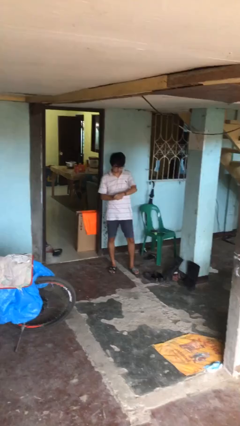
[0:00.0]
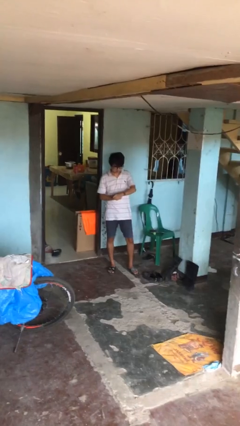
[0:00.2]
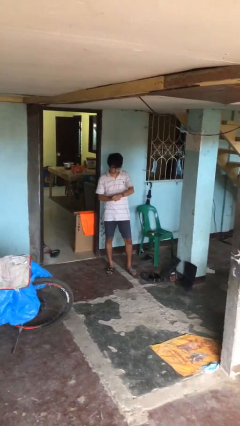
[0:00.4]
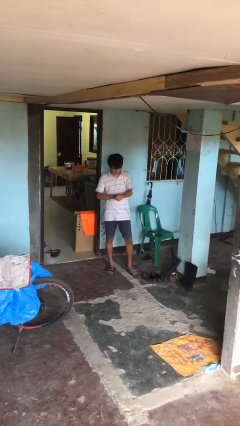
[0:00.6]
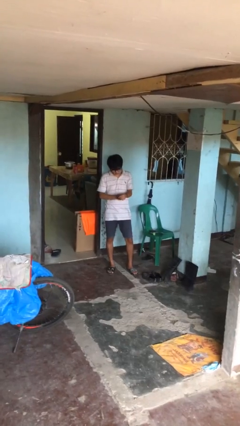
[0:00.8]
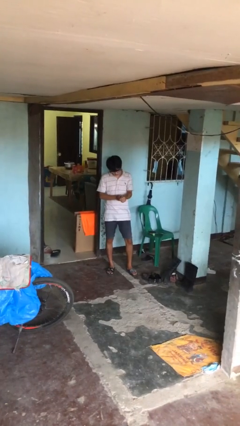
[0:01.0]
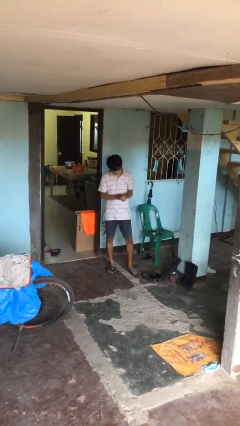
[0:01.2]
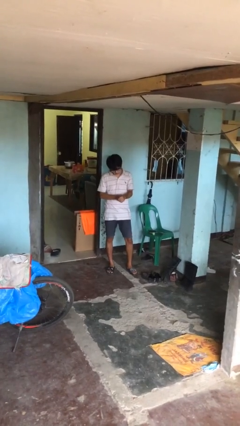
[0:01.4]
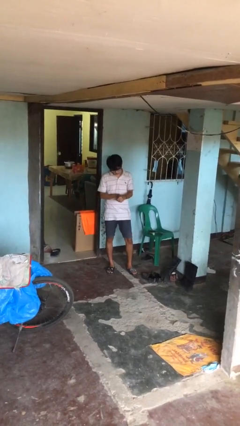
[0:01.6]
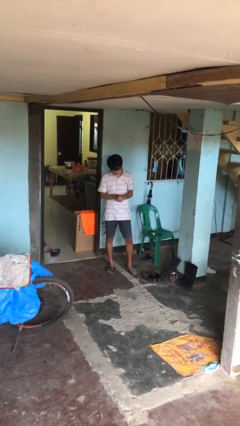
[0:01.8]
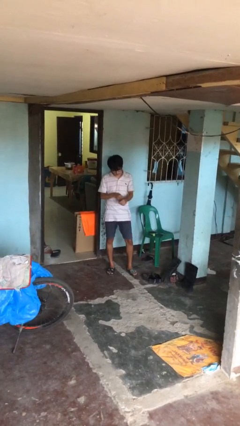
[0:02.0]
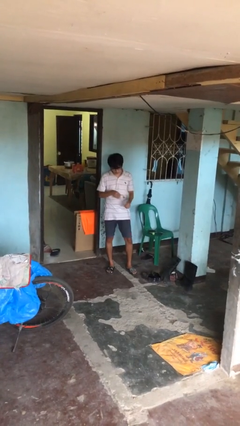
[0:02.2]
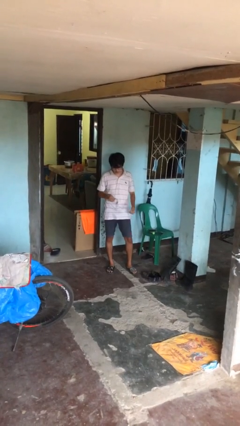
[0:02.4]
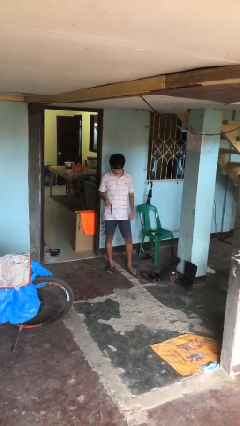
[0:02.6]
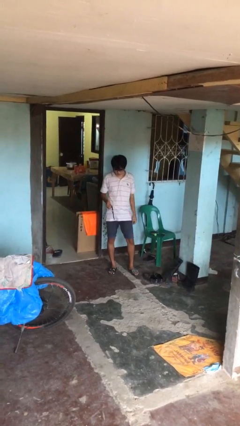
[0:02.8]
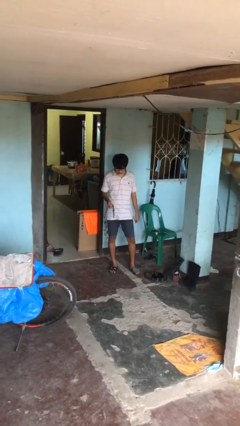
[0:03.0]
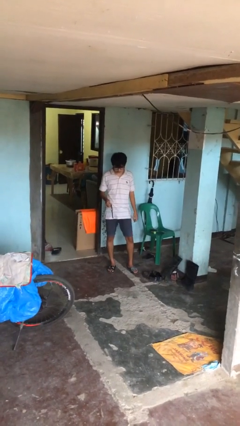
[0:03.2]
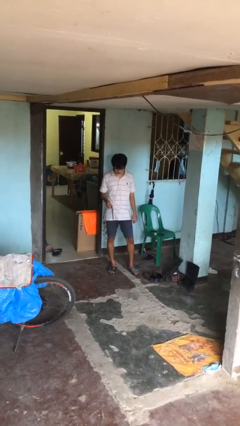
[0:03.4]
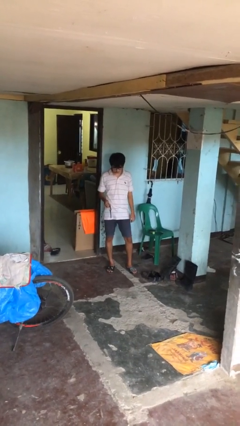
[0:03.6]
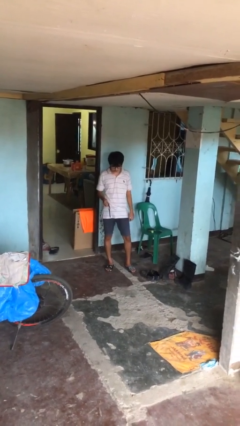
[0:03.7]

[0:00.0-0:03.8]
person takes off wristwatch

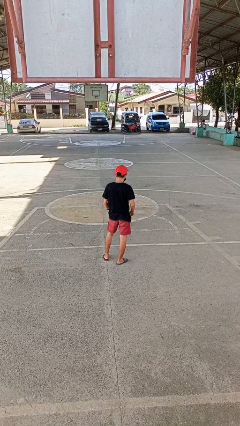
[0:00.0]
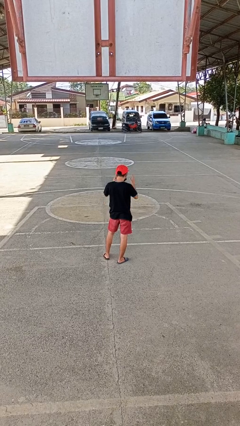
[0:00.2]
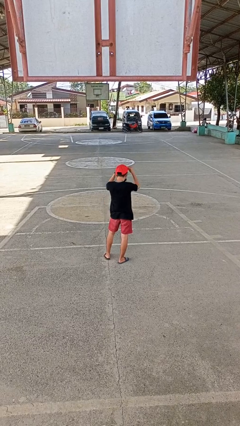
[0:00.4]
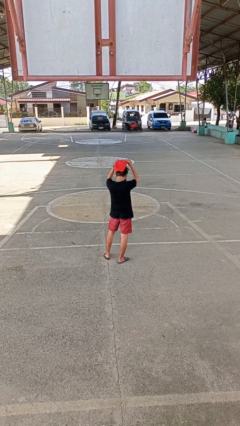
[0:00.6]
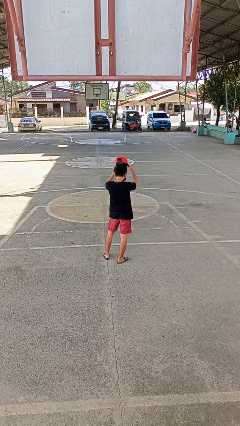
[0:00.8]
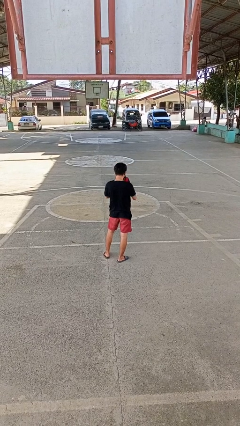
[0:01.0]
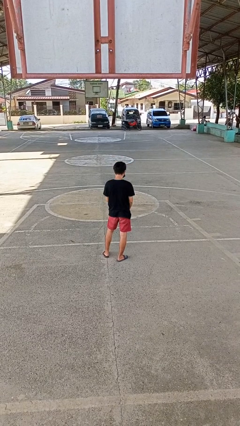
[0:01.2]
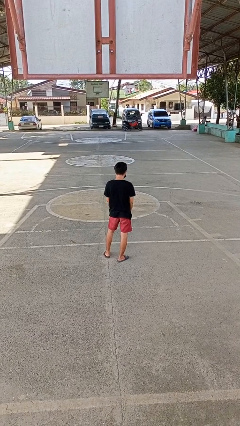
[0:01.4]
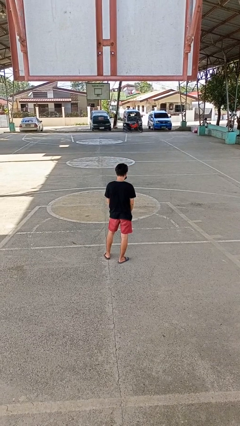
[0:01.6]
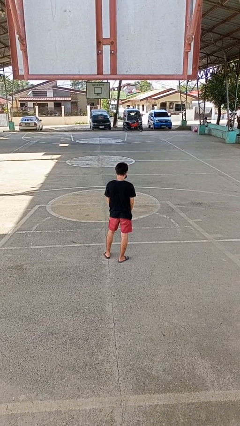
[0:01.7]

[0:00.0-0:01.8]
person takes off hat

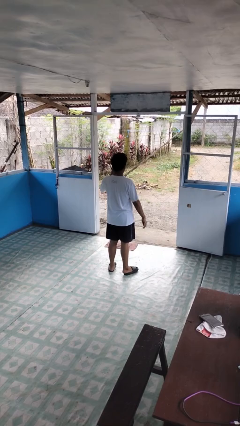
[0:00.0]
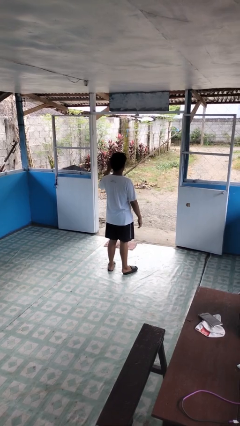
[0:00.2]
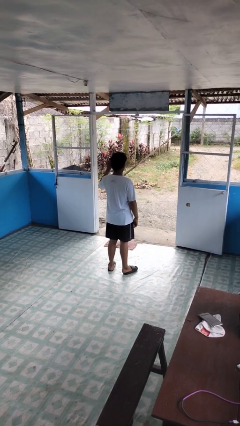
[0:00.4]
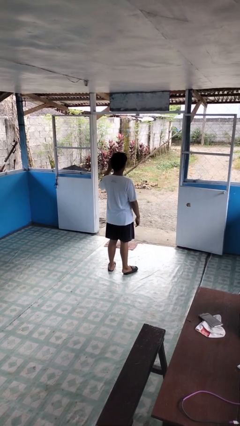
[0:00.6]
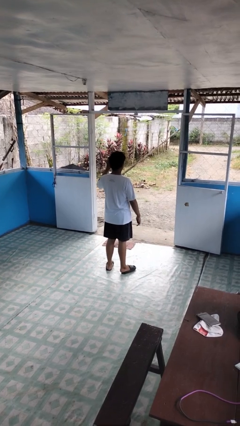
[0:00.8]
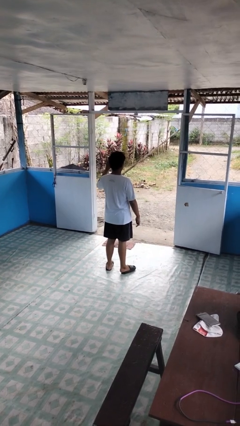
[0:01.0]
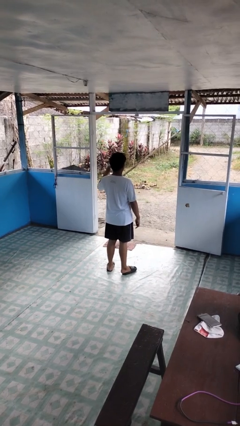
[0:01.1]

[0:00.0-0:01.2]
person gestures number four

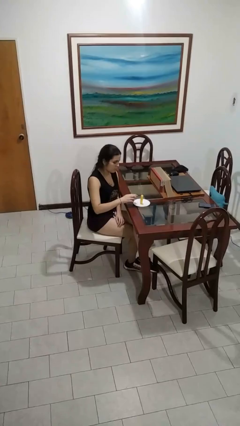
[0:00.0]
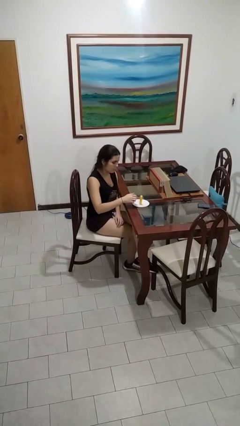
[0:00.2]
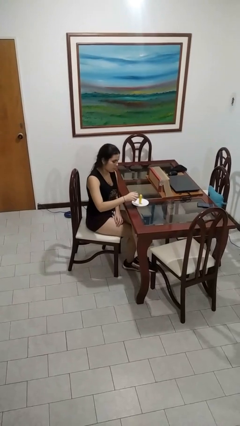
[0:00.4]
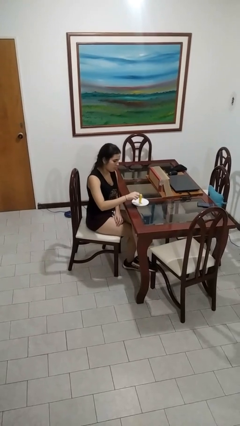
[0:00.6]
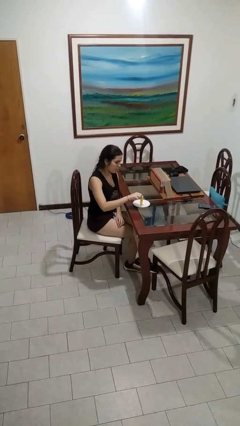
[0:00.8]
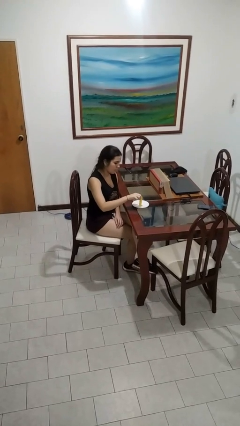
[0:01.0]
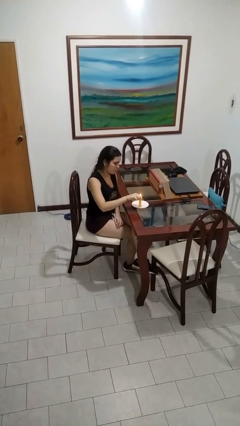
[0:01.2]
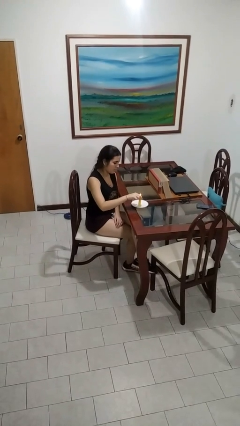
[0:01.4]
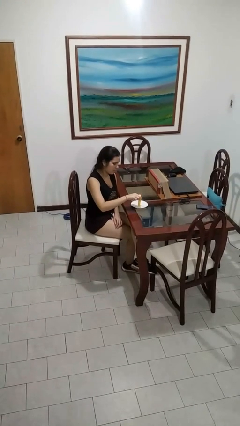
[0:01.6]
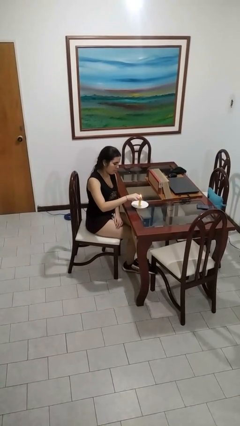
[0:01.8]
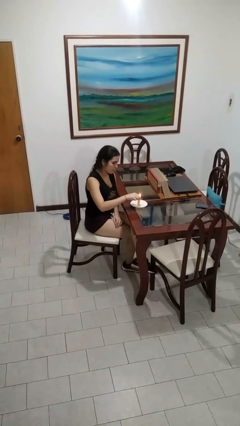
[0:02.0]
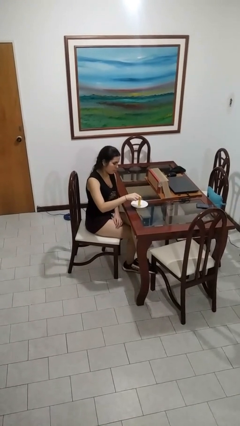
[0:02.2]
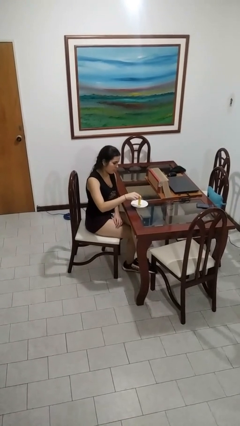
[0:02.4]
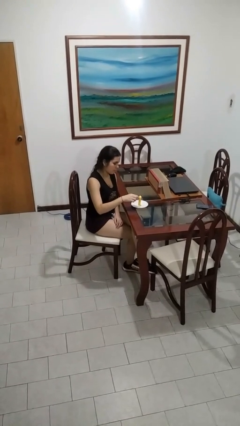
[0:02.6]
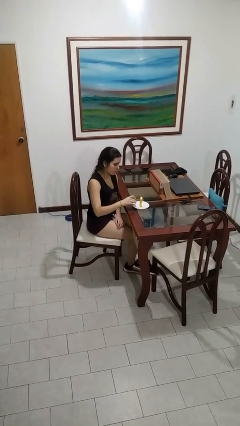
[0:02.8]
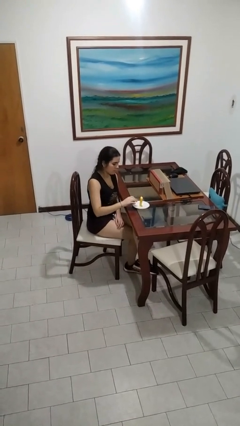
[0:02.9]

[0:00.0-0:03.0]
person lights candle

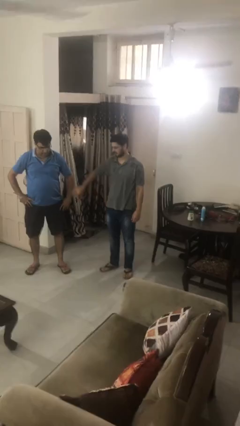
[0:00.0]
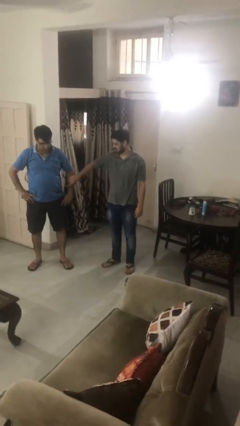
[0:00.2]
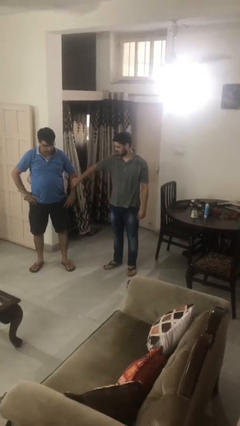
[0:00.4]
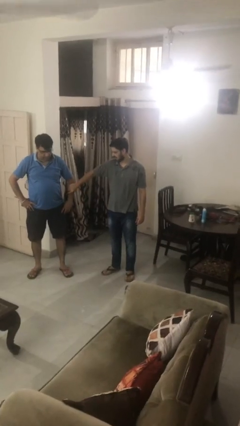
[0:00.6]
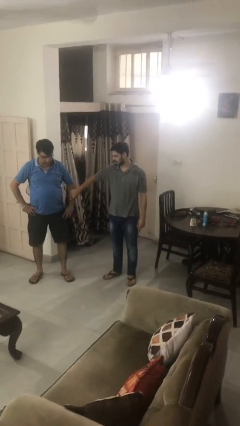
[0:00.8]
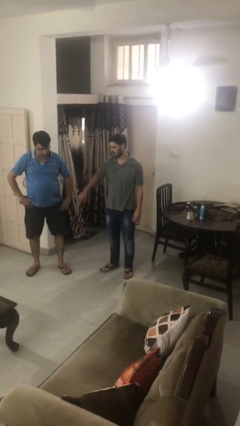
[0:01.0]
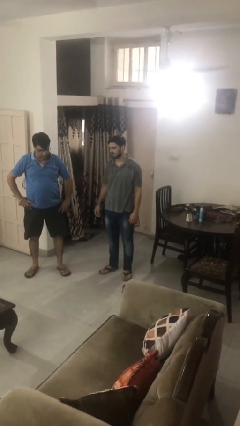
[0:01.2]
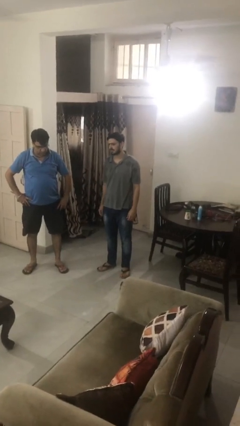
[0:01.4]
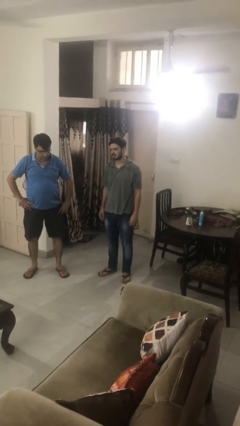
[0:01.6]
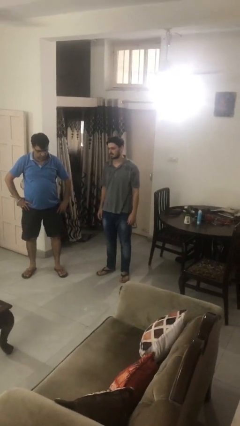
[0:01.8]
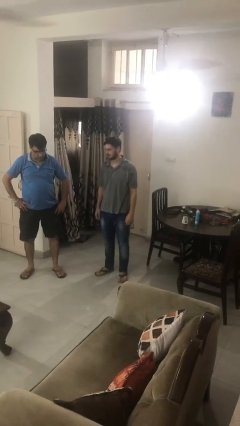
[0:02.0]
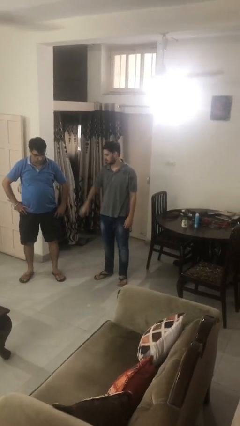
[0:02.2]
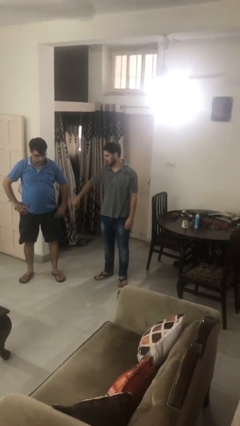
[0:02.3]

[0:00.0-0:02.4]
person grabs person by forearm

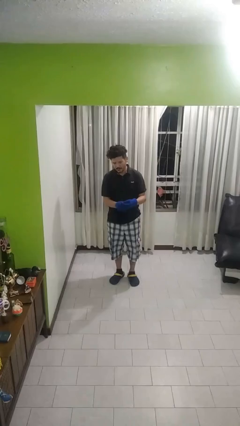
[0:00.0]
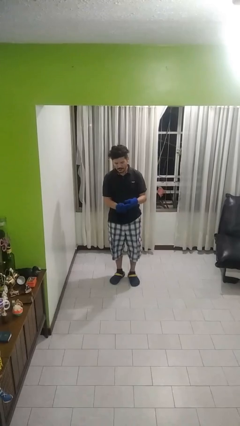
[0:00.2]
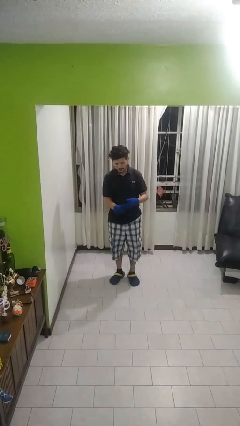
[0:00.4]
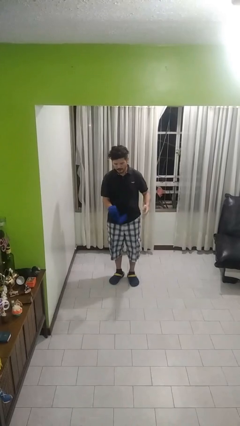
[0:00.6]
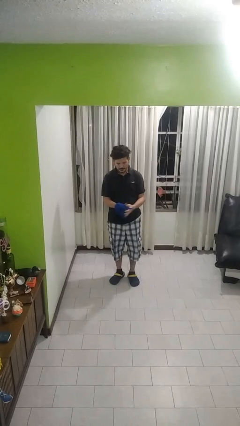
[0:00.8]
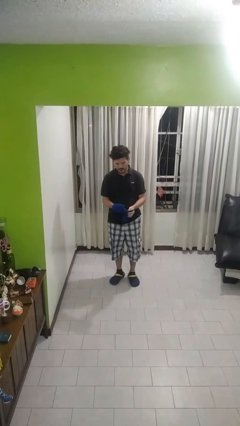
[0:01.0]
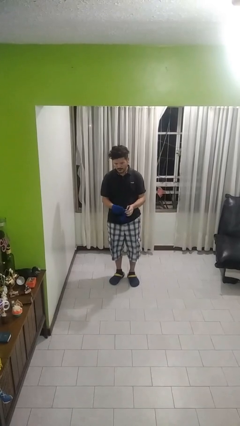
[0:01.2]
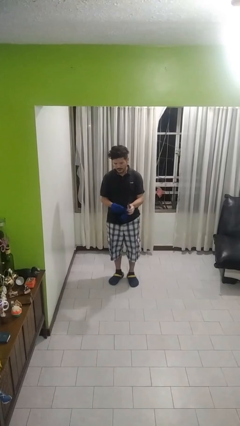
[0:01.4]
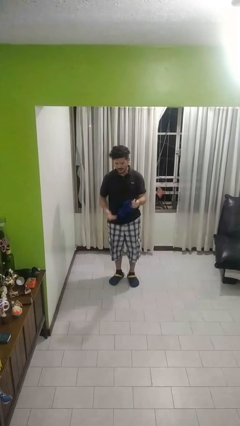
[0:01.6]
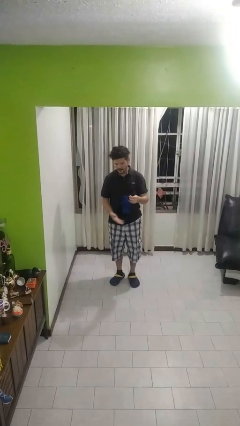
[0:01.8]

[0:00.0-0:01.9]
person takes off gloves

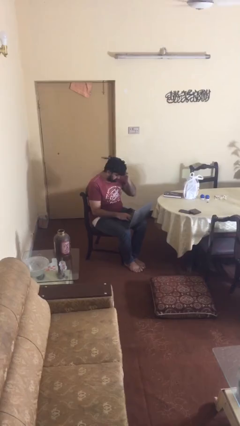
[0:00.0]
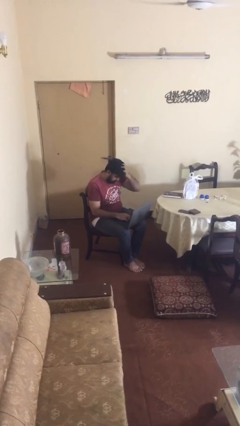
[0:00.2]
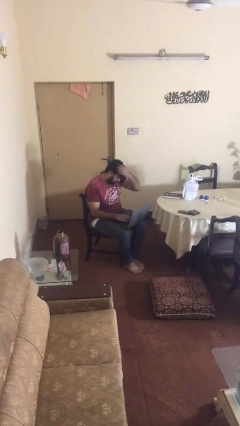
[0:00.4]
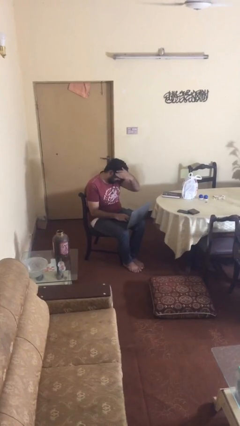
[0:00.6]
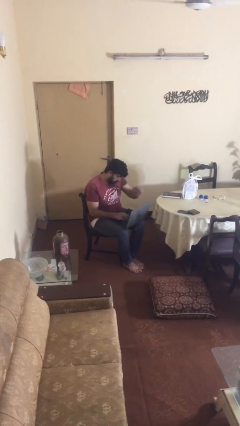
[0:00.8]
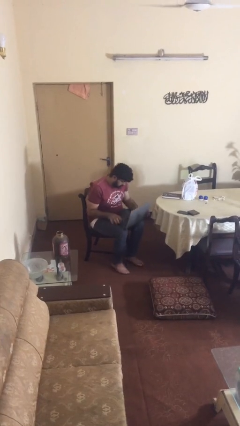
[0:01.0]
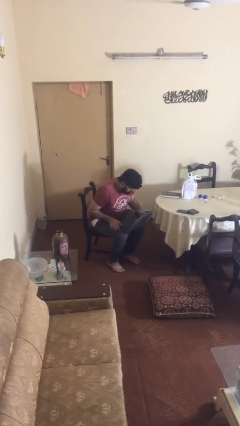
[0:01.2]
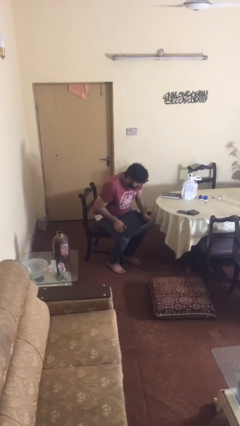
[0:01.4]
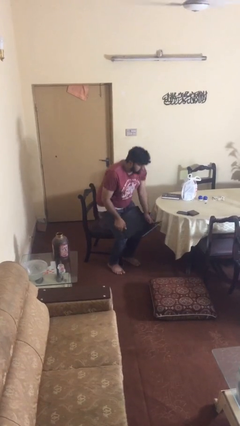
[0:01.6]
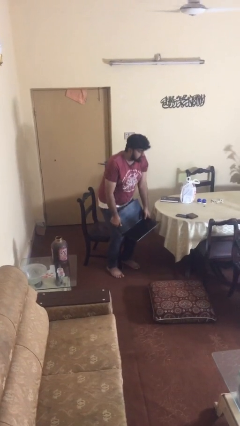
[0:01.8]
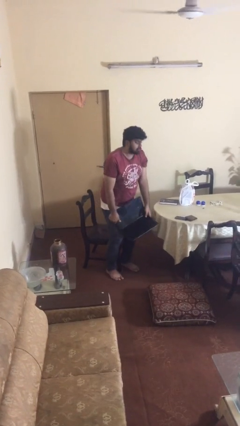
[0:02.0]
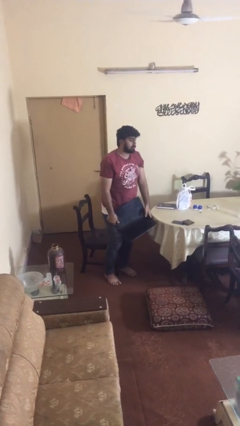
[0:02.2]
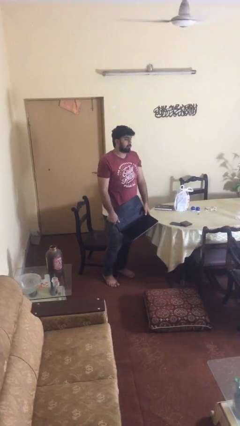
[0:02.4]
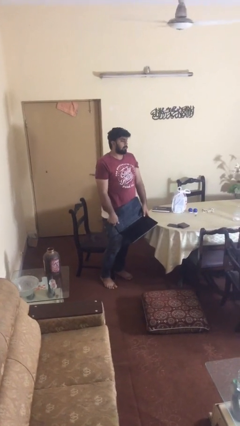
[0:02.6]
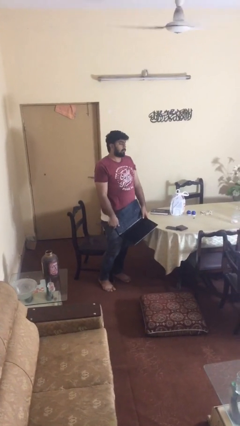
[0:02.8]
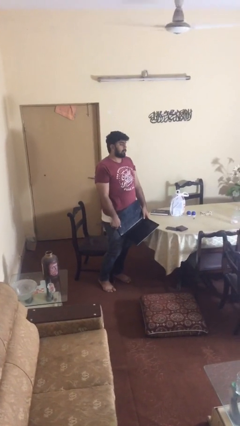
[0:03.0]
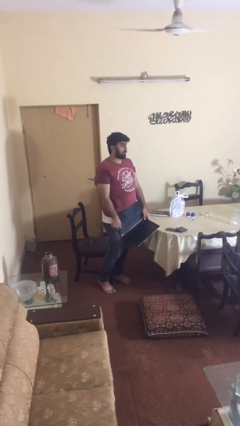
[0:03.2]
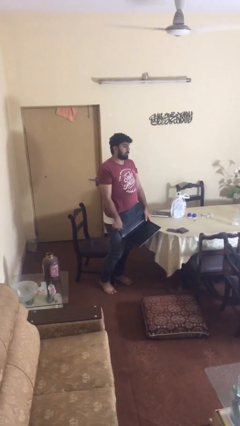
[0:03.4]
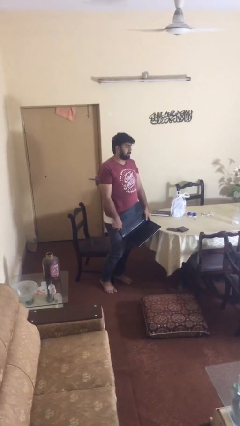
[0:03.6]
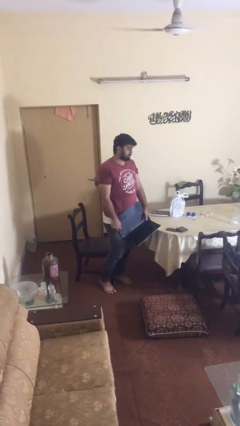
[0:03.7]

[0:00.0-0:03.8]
person stands up
